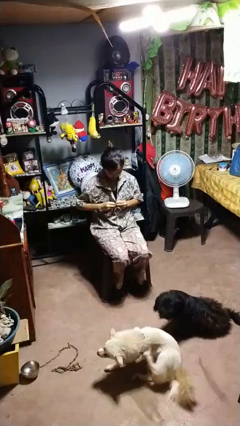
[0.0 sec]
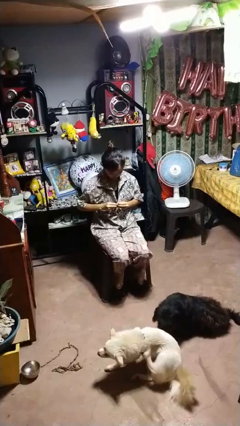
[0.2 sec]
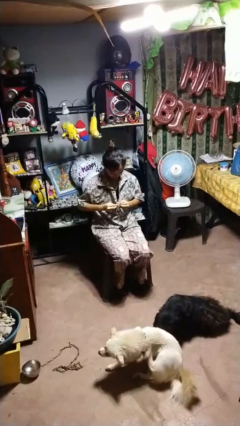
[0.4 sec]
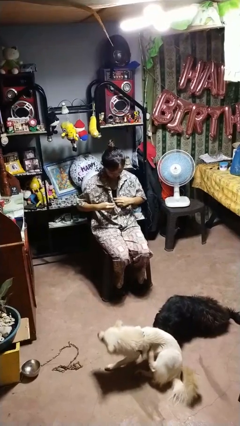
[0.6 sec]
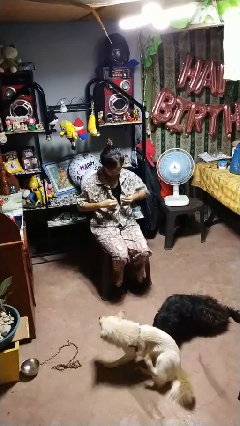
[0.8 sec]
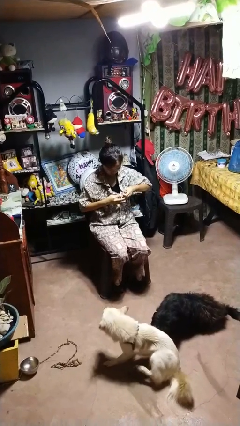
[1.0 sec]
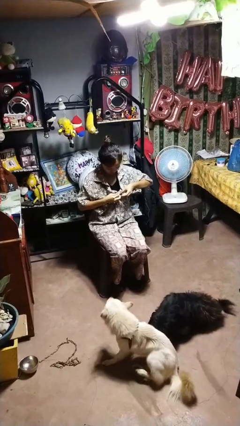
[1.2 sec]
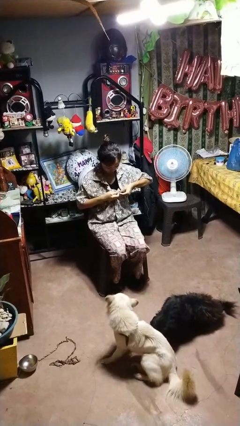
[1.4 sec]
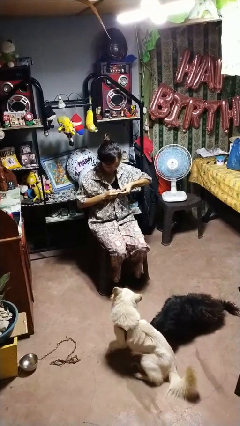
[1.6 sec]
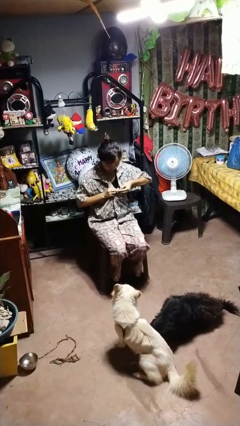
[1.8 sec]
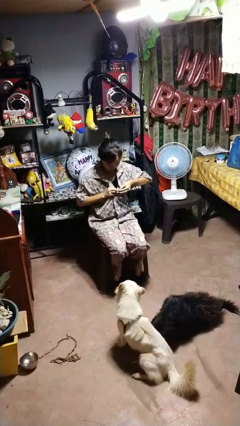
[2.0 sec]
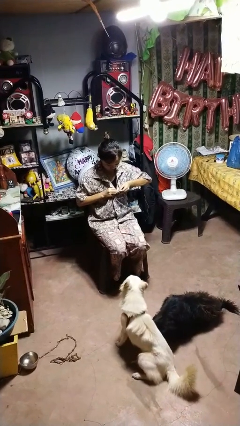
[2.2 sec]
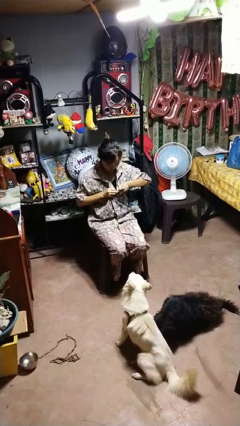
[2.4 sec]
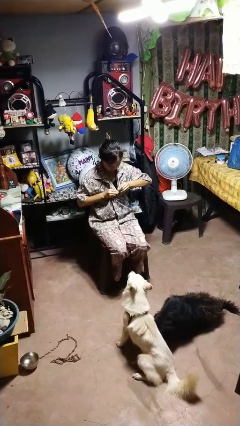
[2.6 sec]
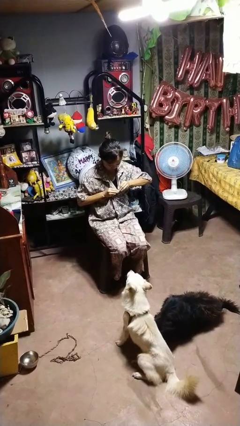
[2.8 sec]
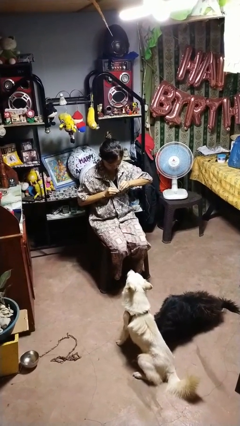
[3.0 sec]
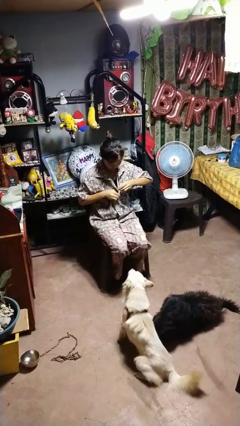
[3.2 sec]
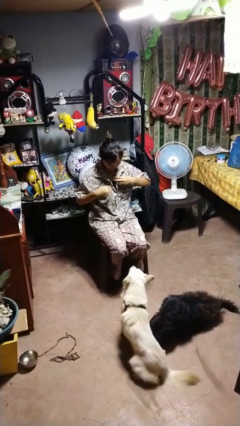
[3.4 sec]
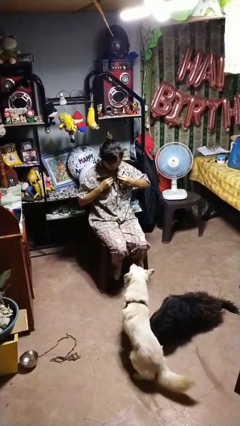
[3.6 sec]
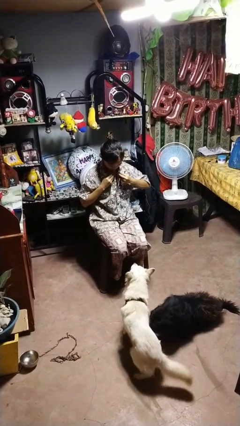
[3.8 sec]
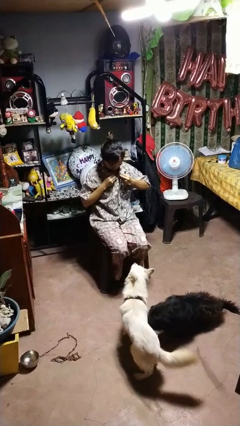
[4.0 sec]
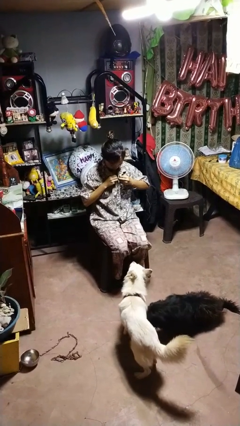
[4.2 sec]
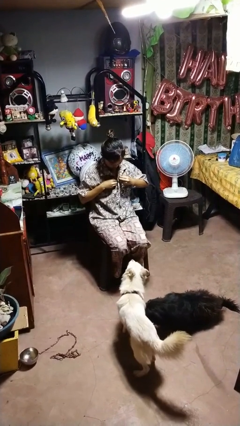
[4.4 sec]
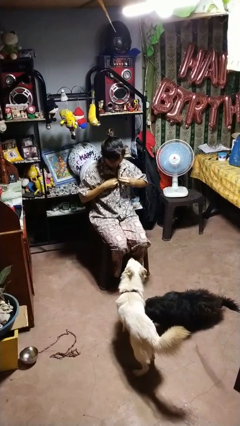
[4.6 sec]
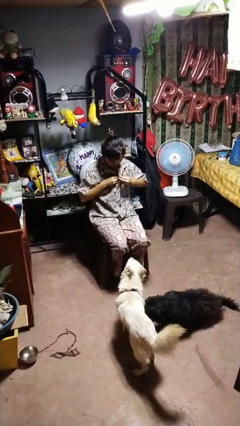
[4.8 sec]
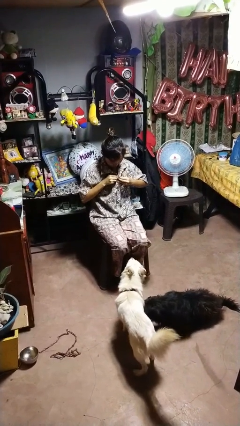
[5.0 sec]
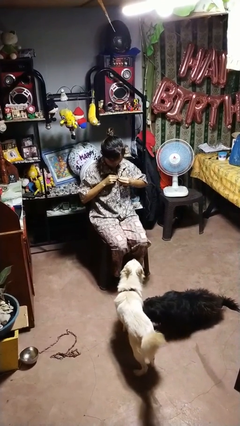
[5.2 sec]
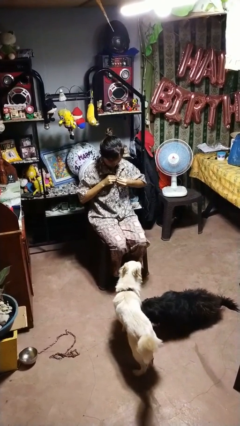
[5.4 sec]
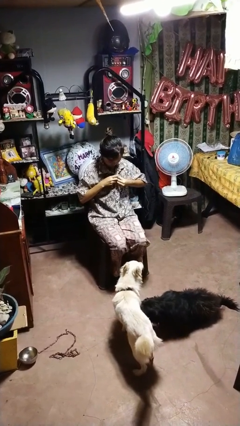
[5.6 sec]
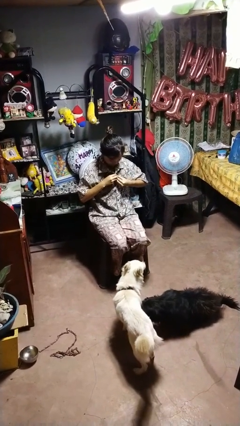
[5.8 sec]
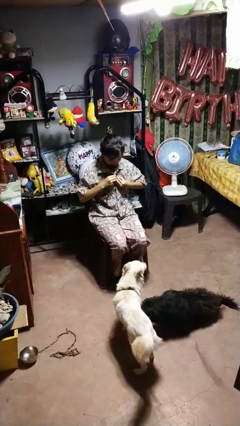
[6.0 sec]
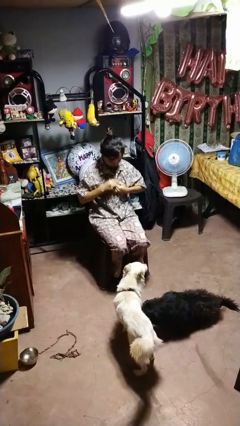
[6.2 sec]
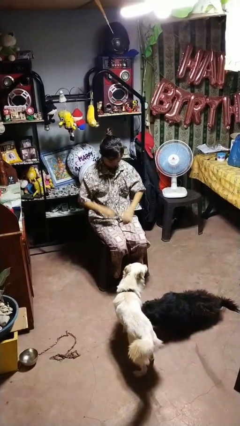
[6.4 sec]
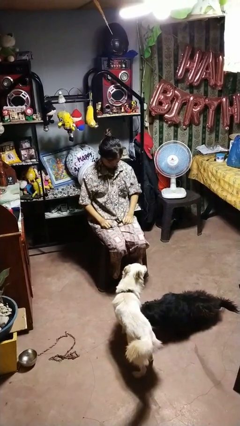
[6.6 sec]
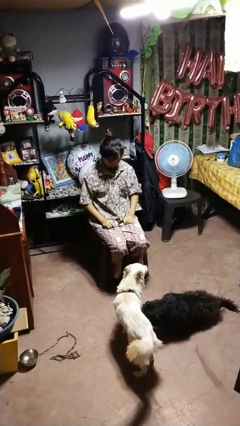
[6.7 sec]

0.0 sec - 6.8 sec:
person buttons shirt

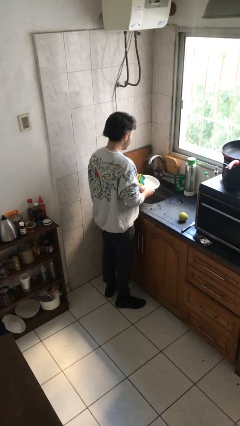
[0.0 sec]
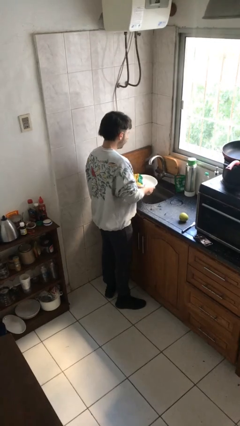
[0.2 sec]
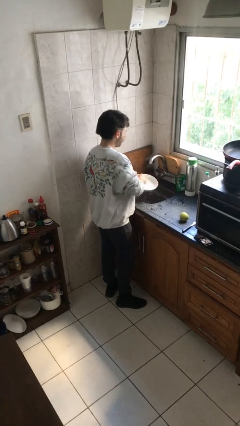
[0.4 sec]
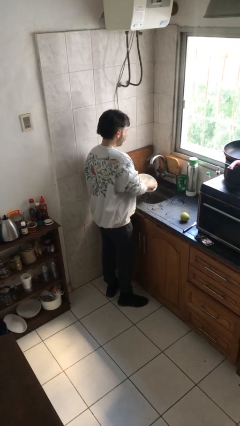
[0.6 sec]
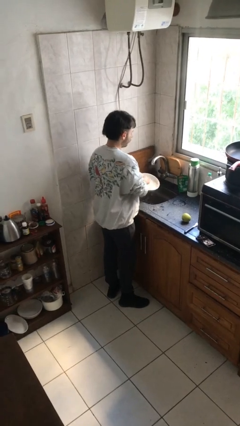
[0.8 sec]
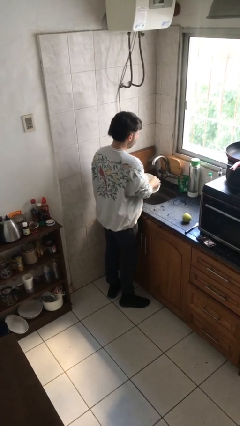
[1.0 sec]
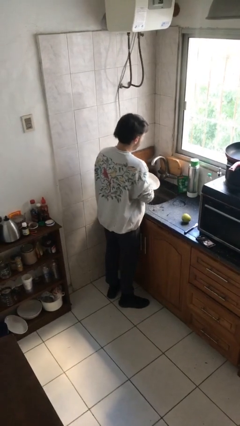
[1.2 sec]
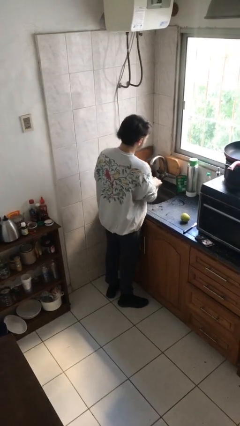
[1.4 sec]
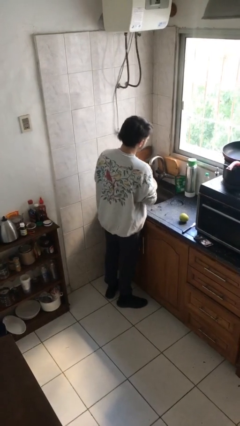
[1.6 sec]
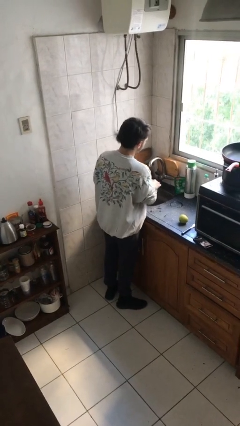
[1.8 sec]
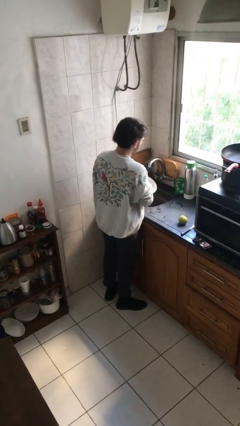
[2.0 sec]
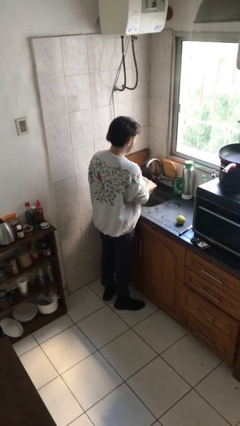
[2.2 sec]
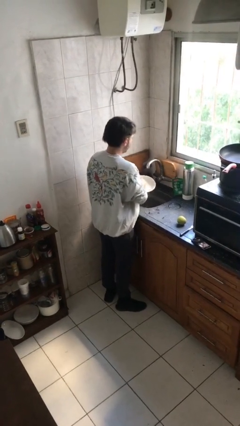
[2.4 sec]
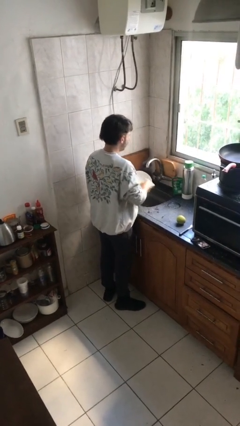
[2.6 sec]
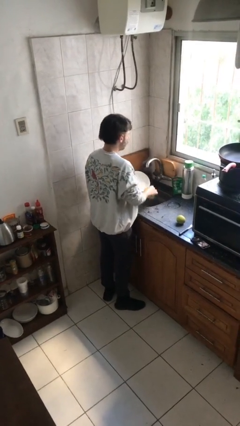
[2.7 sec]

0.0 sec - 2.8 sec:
person washes dish

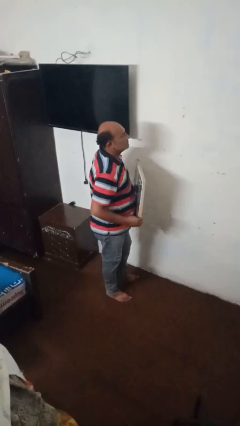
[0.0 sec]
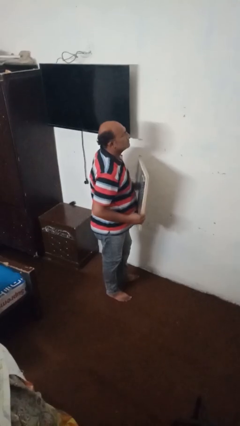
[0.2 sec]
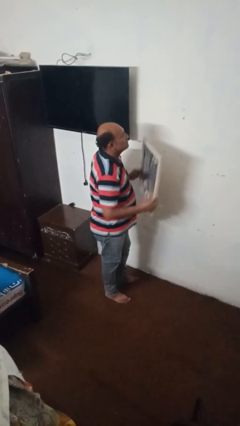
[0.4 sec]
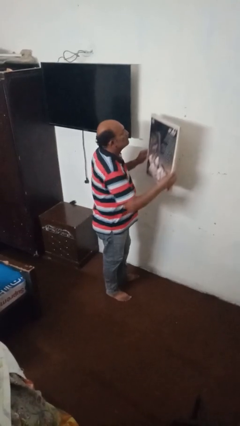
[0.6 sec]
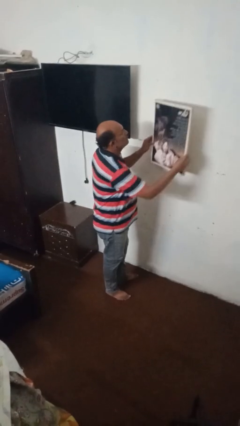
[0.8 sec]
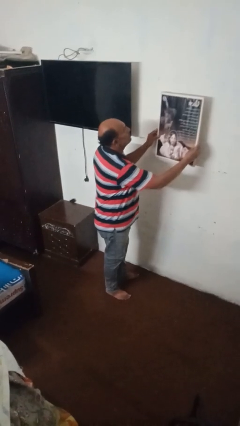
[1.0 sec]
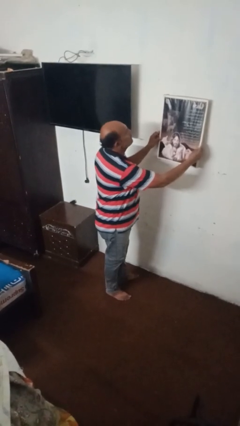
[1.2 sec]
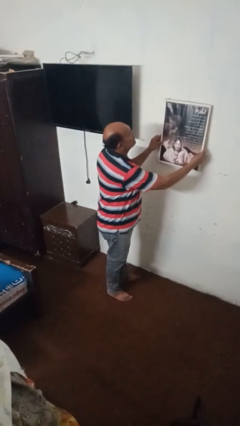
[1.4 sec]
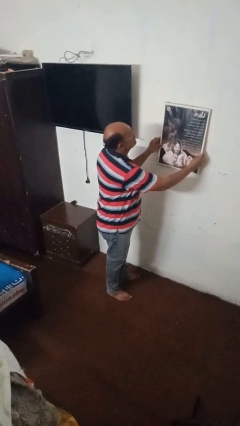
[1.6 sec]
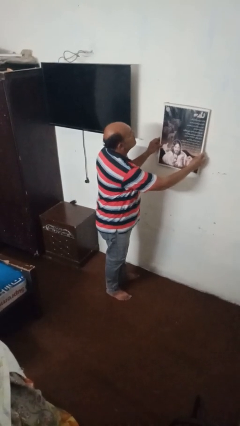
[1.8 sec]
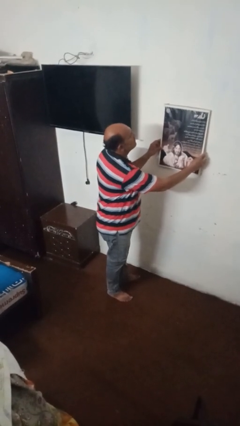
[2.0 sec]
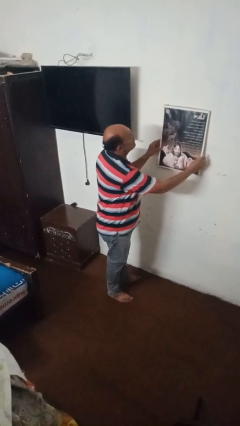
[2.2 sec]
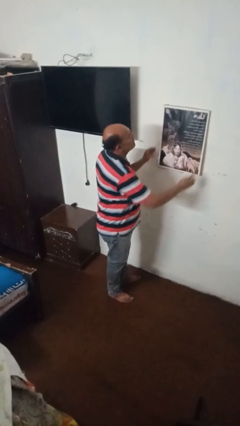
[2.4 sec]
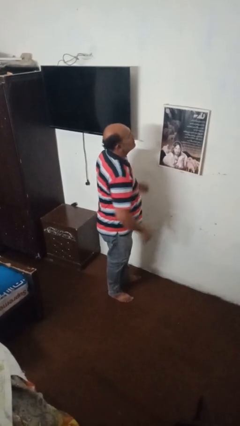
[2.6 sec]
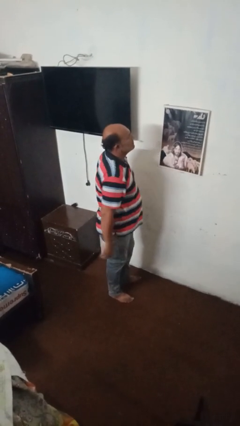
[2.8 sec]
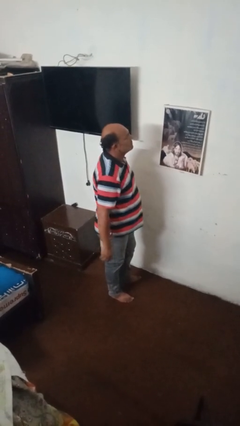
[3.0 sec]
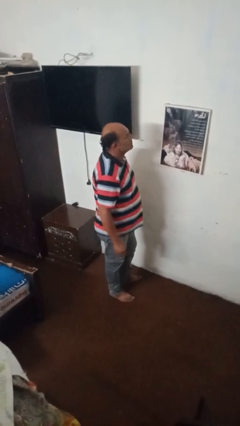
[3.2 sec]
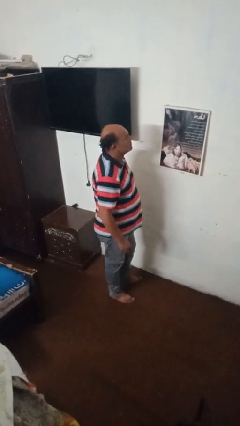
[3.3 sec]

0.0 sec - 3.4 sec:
person puts up picture frame

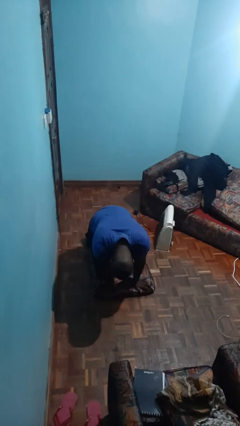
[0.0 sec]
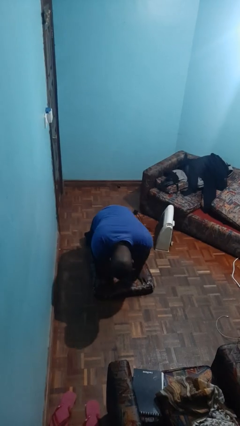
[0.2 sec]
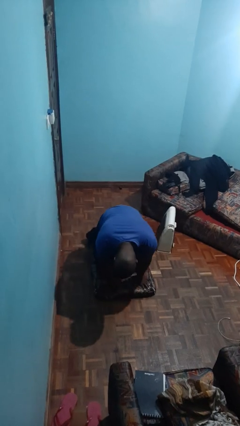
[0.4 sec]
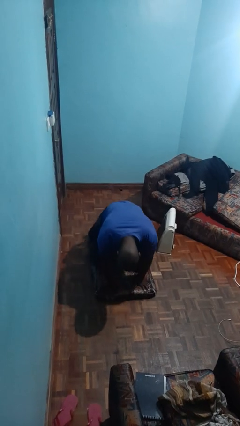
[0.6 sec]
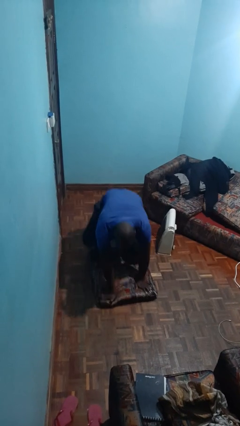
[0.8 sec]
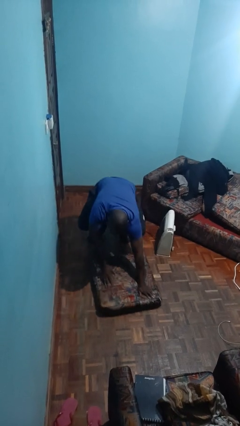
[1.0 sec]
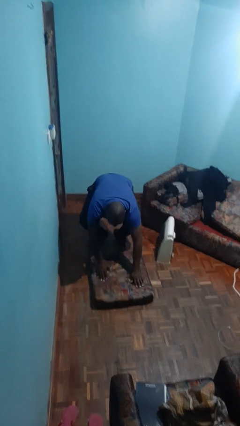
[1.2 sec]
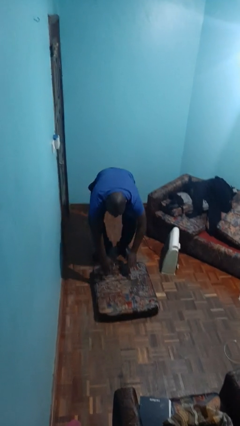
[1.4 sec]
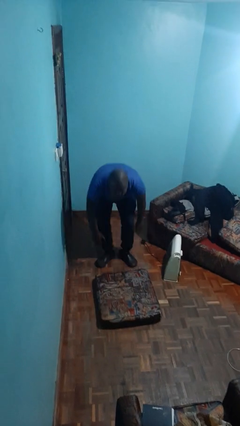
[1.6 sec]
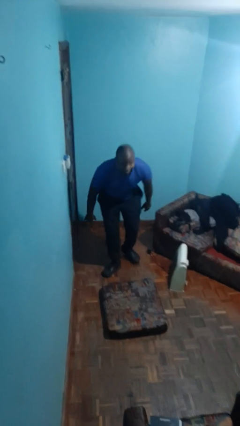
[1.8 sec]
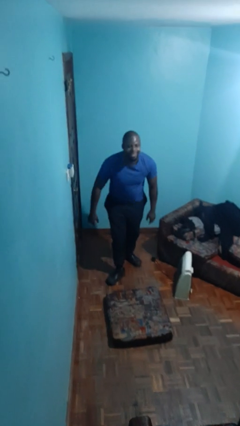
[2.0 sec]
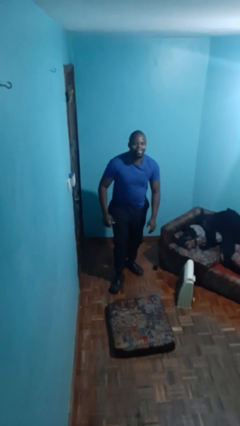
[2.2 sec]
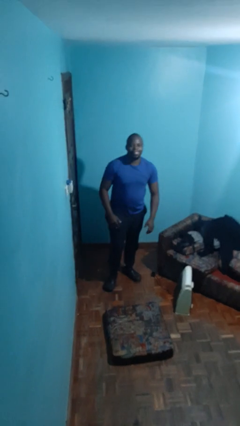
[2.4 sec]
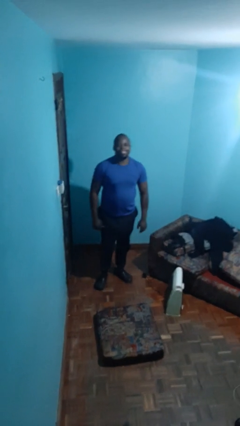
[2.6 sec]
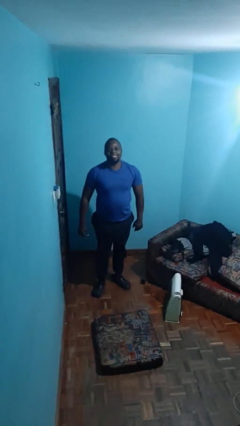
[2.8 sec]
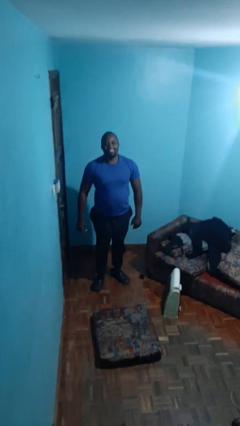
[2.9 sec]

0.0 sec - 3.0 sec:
person stands up from floor

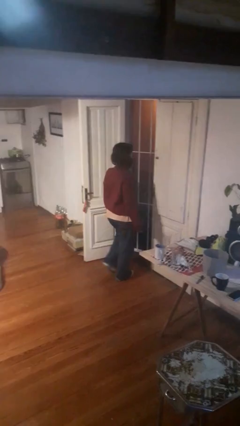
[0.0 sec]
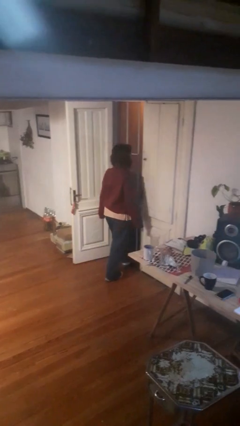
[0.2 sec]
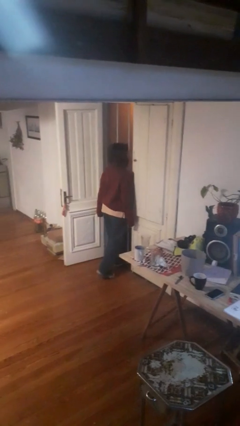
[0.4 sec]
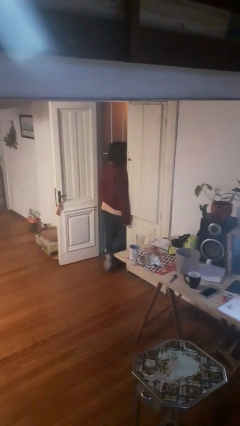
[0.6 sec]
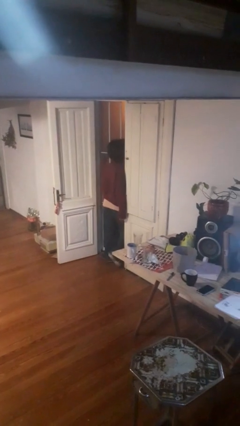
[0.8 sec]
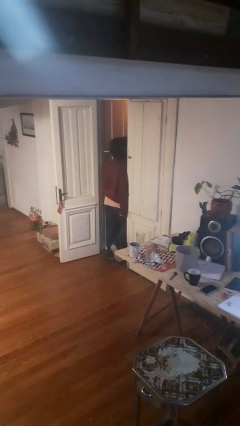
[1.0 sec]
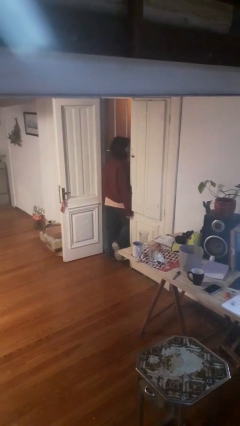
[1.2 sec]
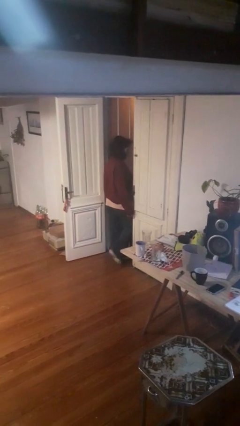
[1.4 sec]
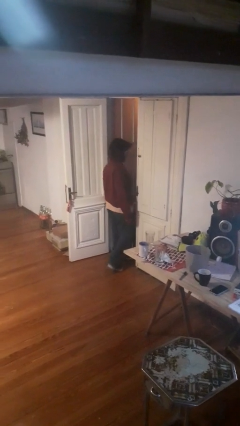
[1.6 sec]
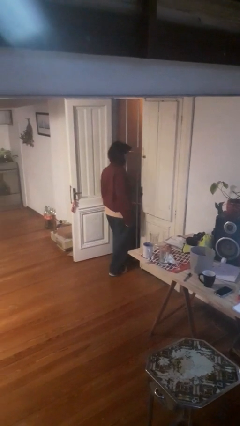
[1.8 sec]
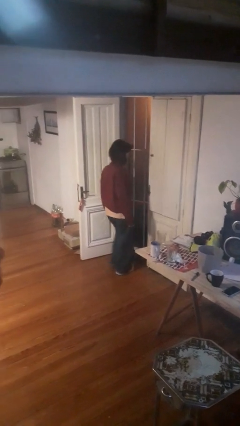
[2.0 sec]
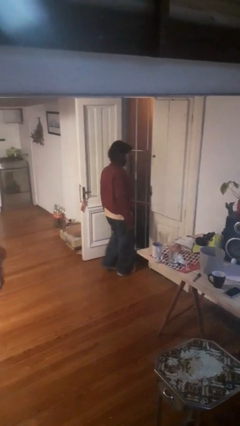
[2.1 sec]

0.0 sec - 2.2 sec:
person bumps into wall
